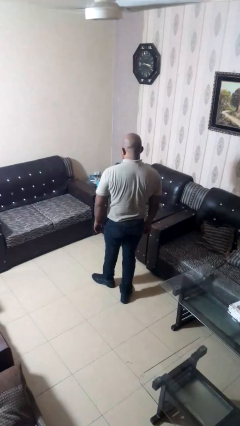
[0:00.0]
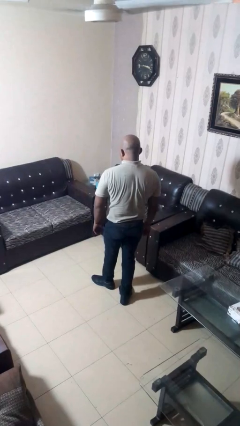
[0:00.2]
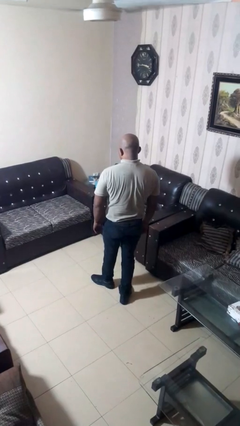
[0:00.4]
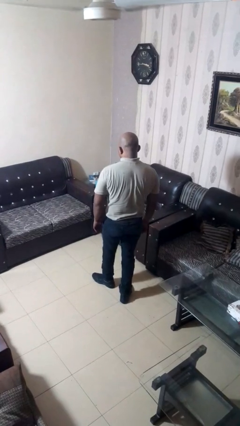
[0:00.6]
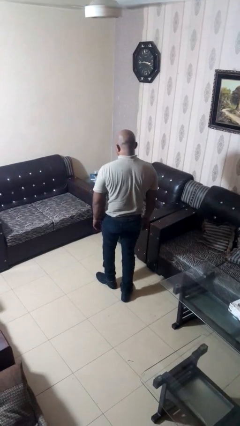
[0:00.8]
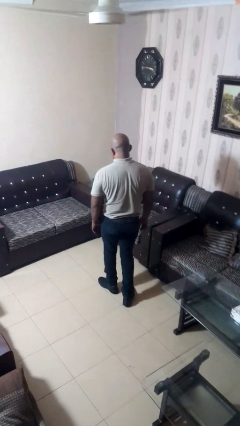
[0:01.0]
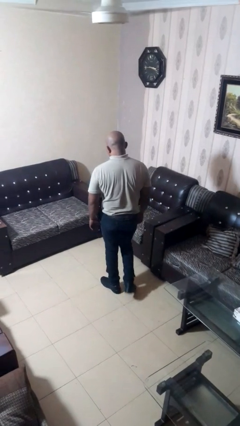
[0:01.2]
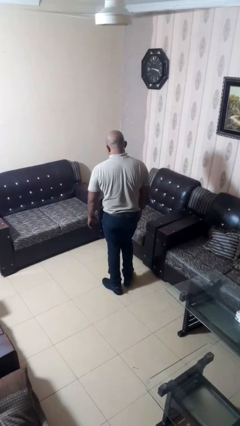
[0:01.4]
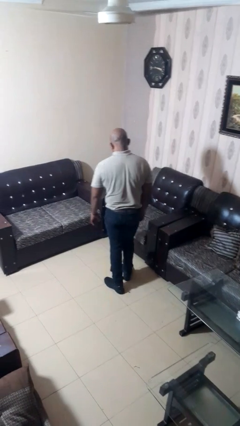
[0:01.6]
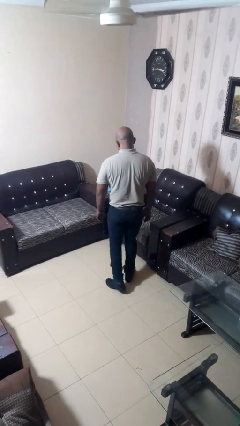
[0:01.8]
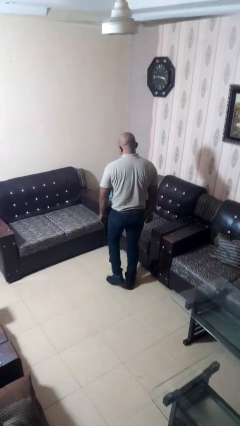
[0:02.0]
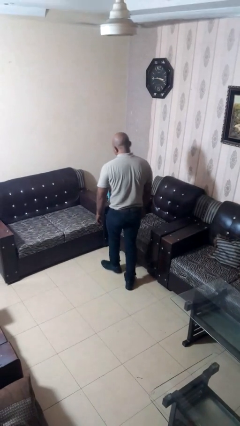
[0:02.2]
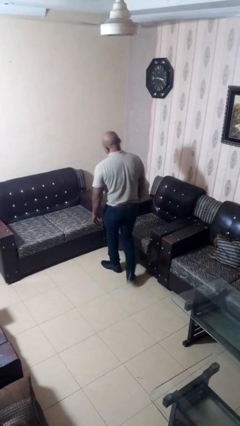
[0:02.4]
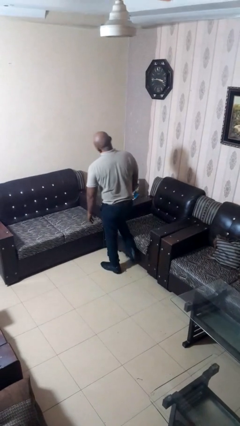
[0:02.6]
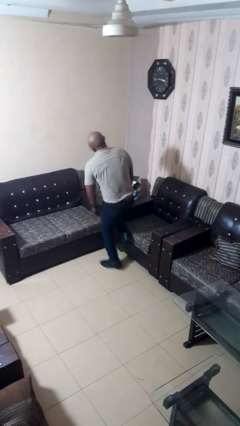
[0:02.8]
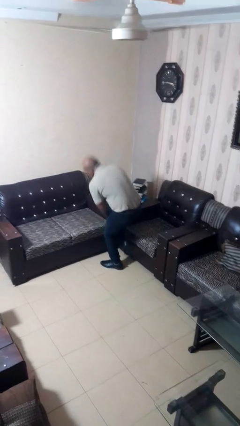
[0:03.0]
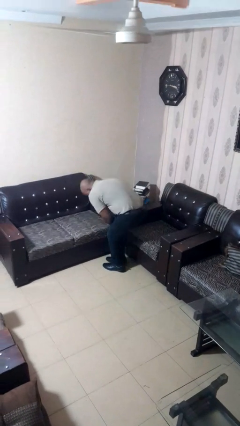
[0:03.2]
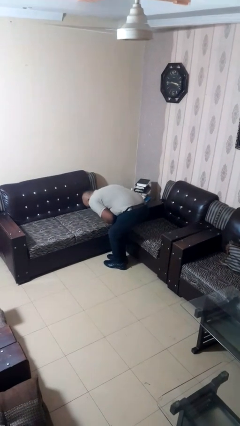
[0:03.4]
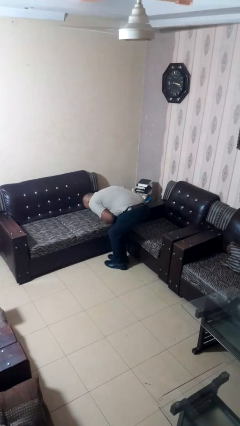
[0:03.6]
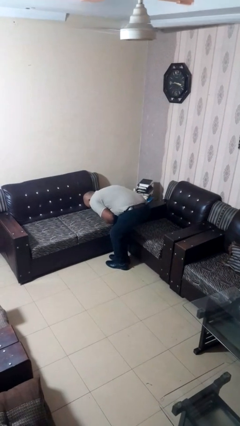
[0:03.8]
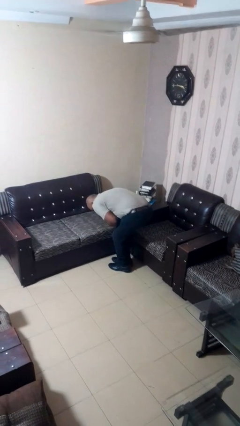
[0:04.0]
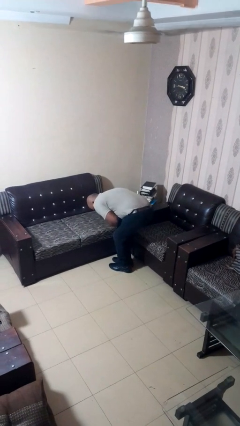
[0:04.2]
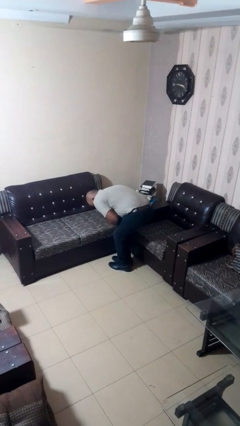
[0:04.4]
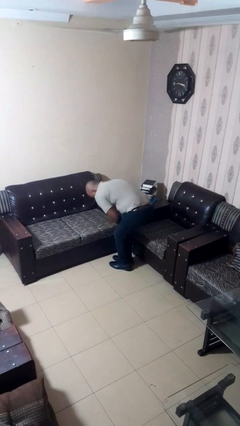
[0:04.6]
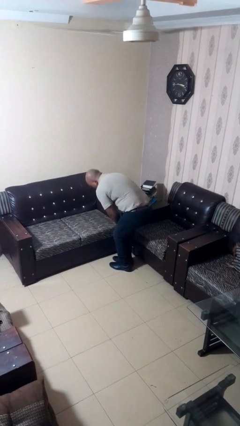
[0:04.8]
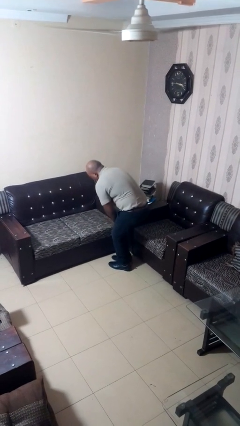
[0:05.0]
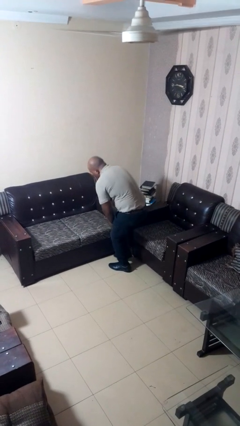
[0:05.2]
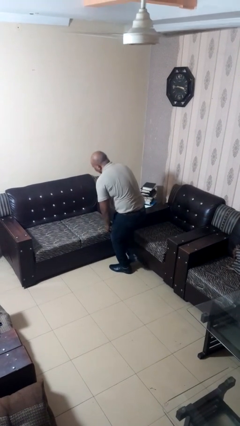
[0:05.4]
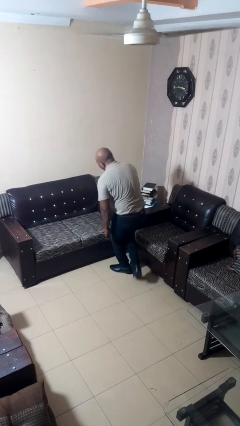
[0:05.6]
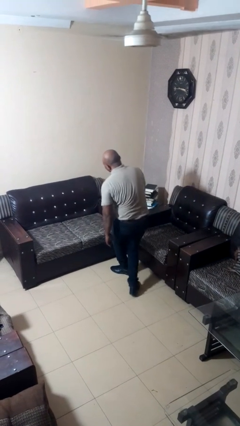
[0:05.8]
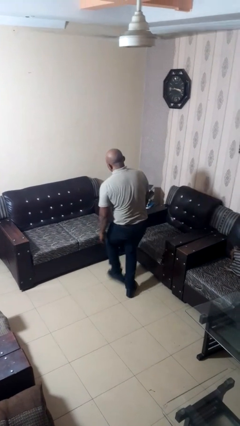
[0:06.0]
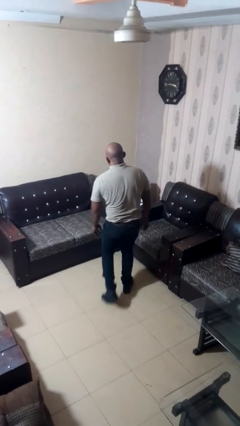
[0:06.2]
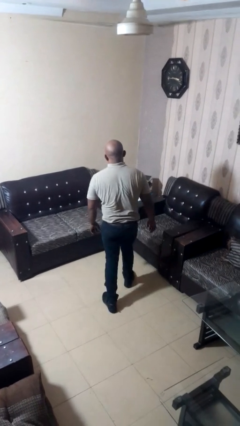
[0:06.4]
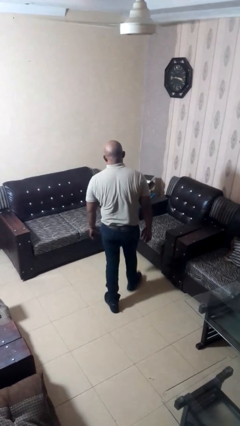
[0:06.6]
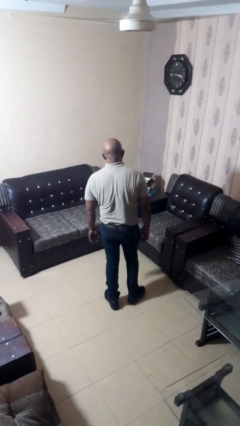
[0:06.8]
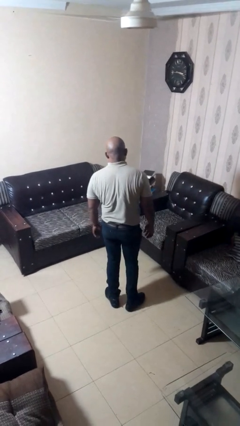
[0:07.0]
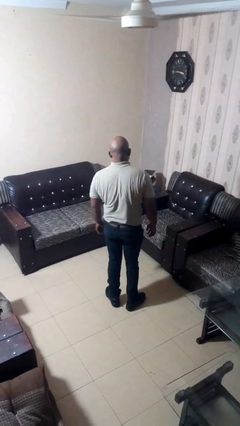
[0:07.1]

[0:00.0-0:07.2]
person stubs toe

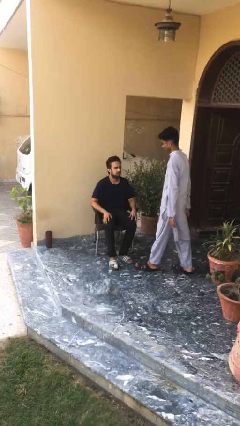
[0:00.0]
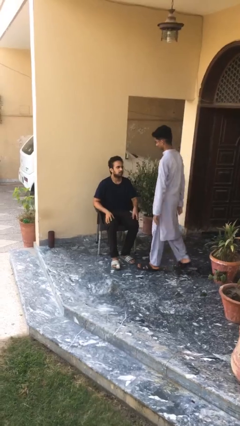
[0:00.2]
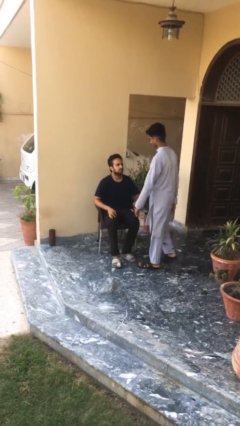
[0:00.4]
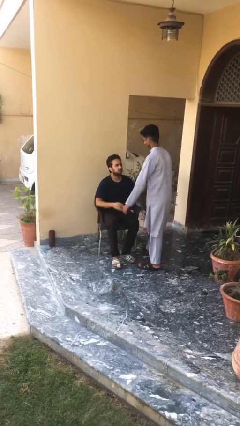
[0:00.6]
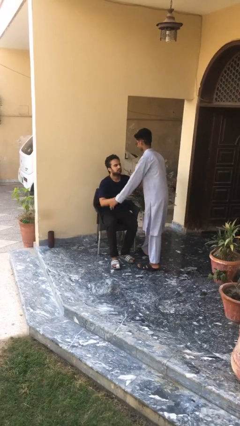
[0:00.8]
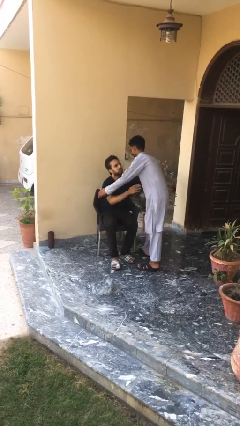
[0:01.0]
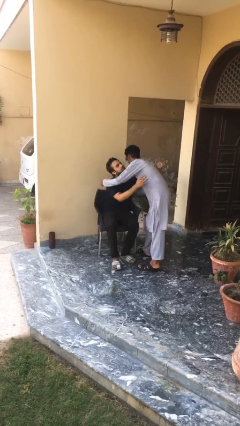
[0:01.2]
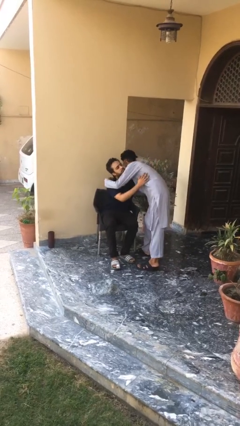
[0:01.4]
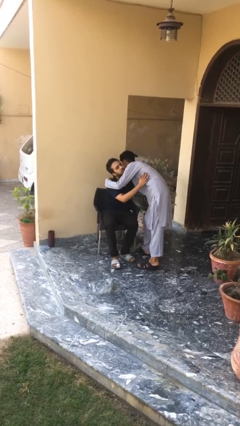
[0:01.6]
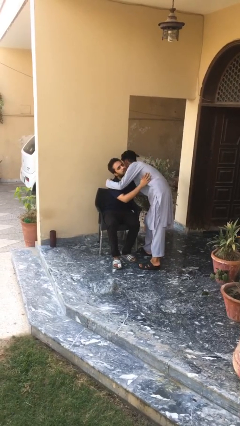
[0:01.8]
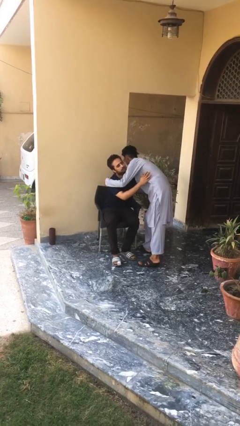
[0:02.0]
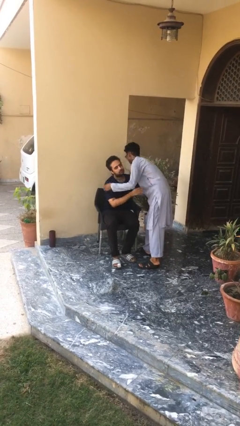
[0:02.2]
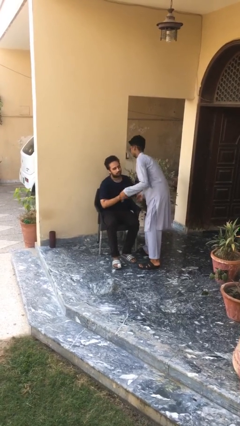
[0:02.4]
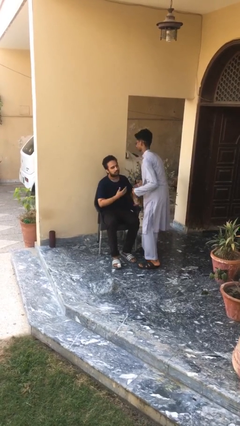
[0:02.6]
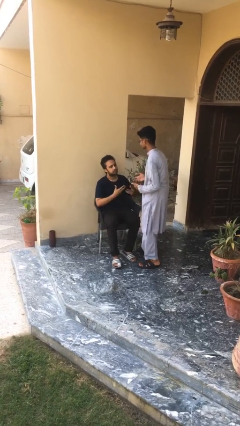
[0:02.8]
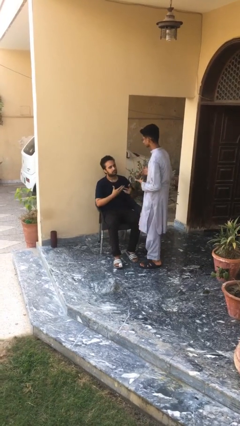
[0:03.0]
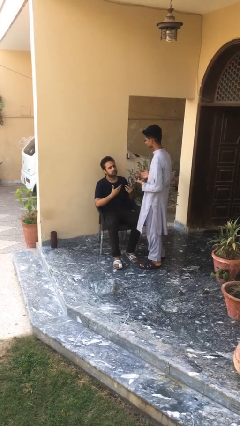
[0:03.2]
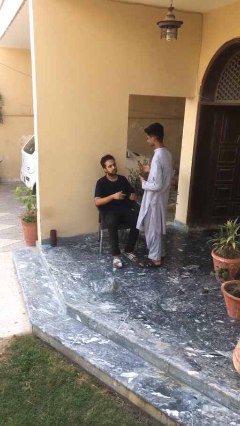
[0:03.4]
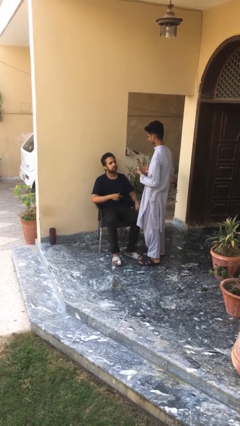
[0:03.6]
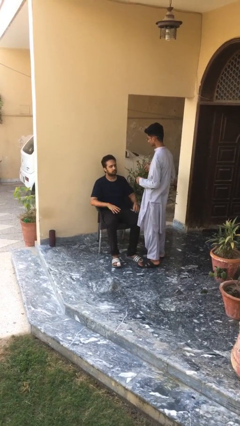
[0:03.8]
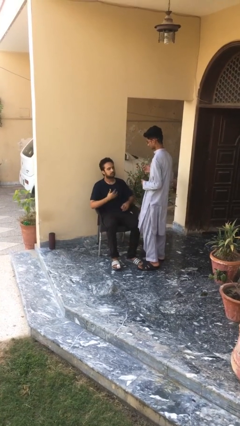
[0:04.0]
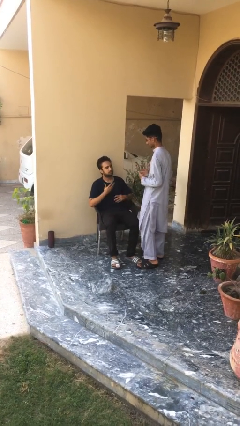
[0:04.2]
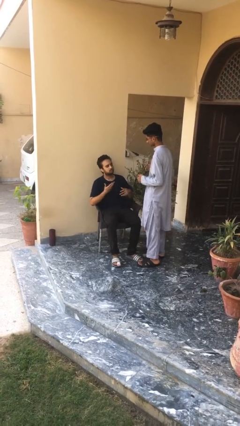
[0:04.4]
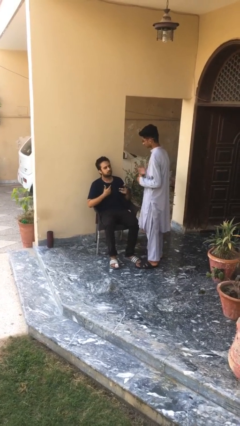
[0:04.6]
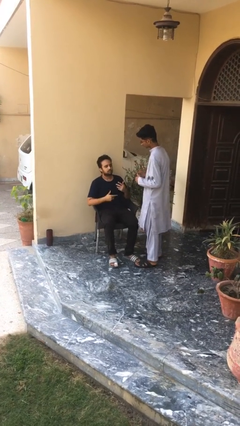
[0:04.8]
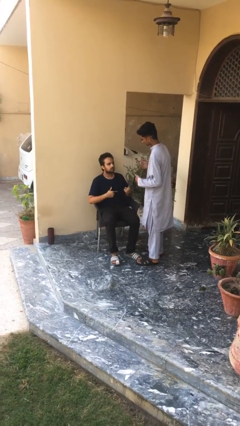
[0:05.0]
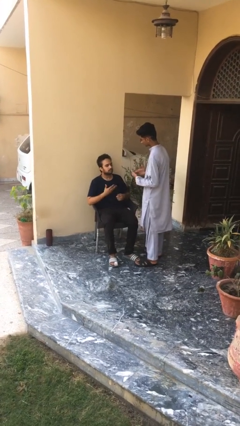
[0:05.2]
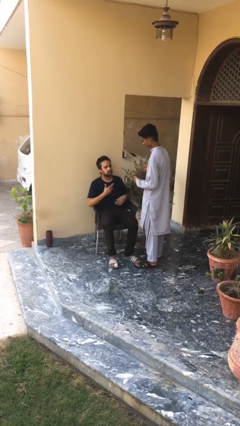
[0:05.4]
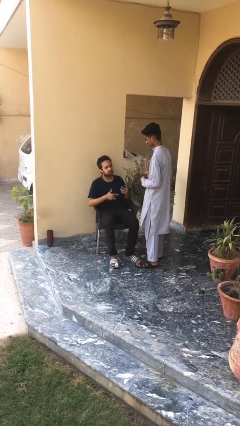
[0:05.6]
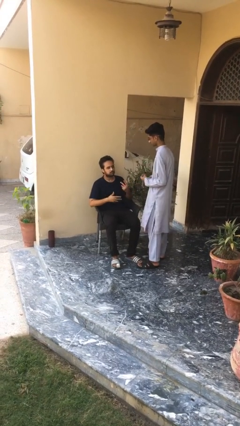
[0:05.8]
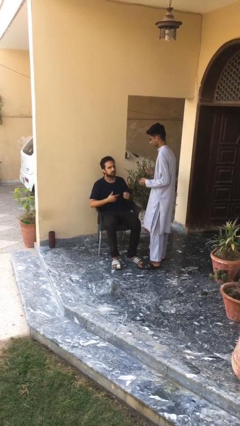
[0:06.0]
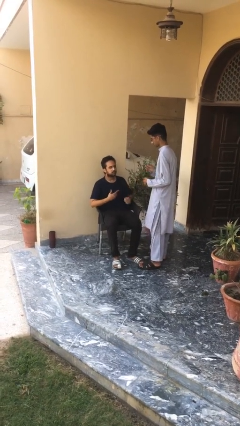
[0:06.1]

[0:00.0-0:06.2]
person embraces person

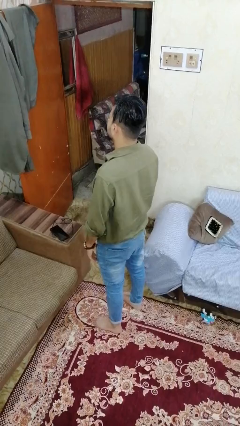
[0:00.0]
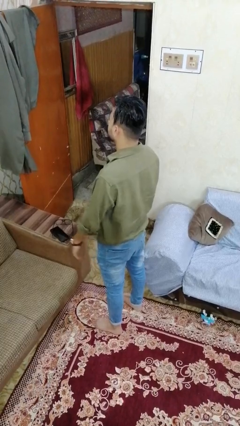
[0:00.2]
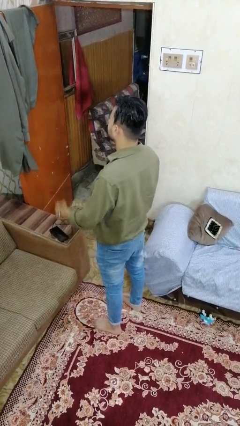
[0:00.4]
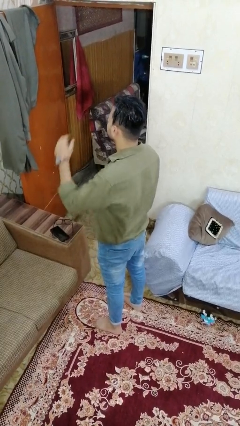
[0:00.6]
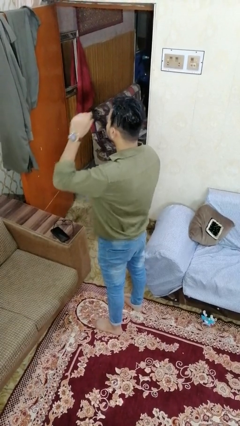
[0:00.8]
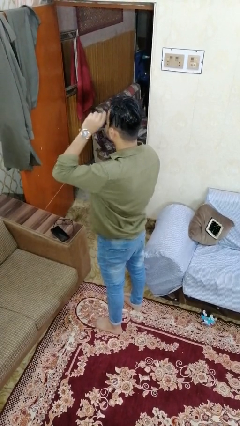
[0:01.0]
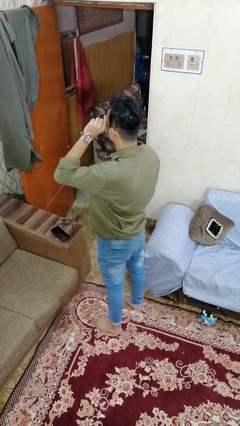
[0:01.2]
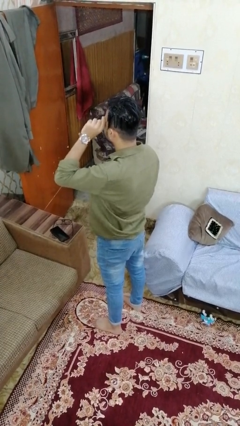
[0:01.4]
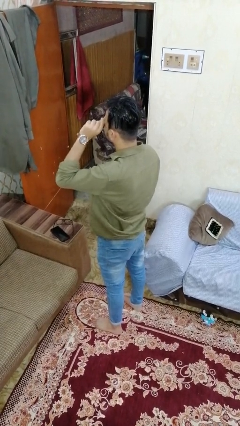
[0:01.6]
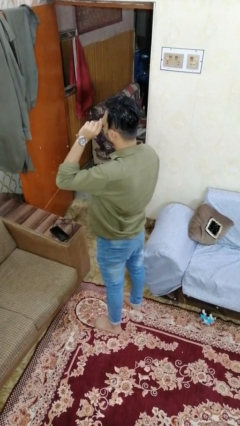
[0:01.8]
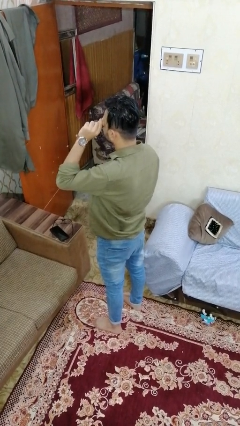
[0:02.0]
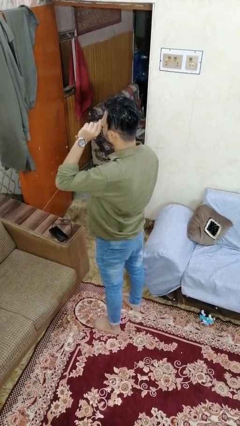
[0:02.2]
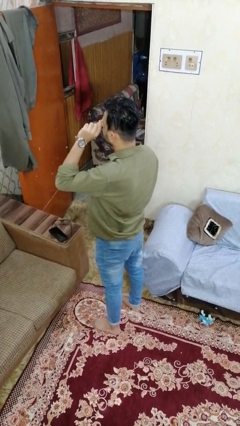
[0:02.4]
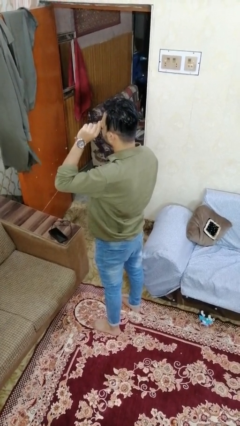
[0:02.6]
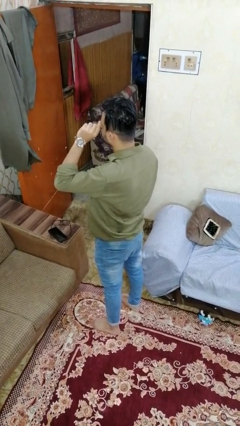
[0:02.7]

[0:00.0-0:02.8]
person scratches face

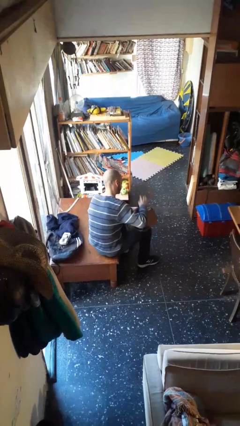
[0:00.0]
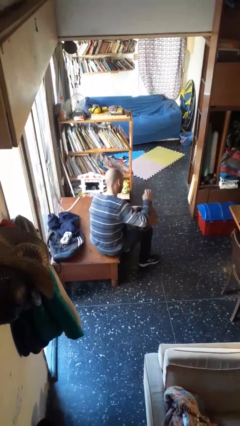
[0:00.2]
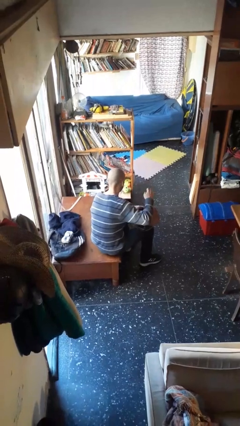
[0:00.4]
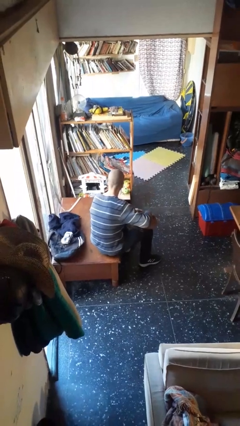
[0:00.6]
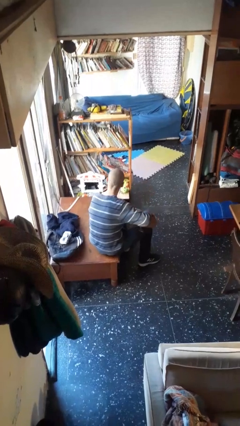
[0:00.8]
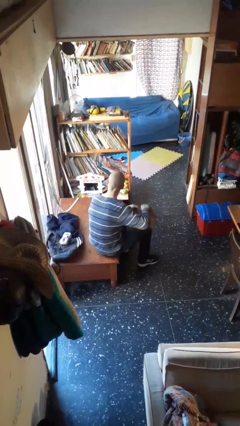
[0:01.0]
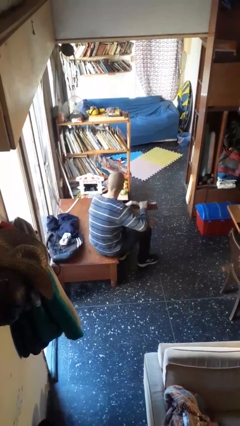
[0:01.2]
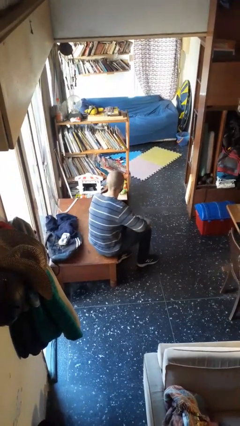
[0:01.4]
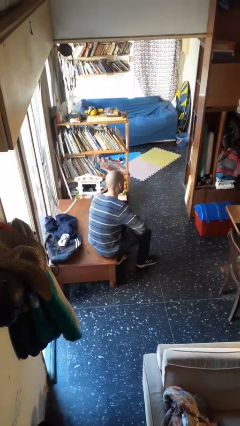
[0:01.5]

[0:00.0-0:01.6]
person puts object into purse
